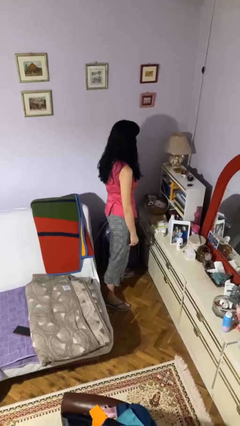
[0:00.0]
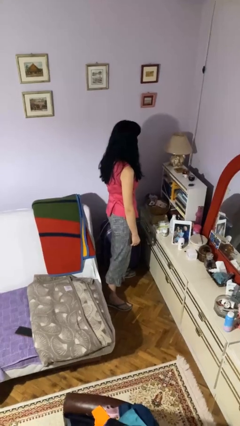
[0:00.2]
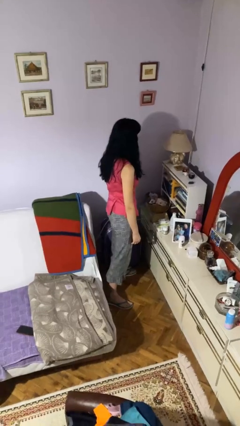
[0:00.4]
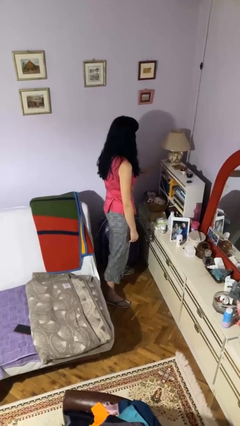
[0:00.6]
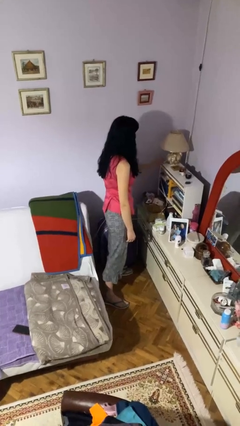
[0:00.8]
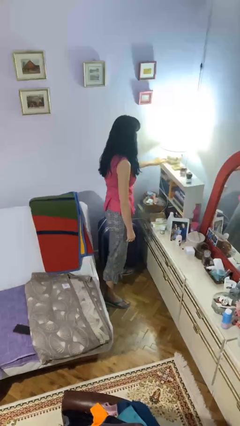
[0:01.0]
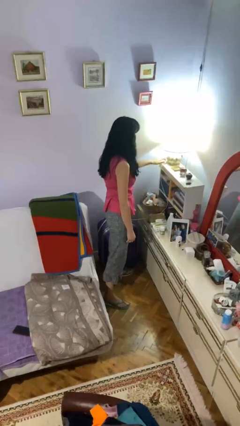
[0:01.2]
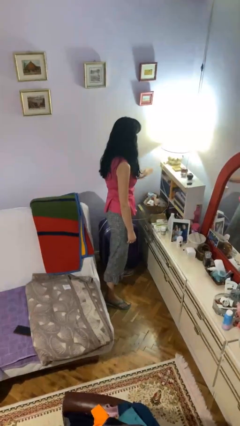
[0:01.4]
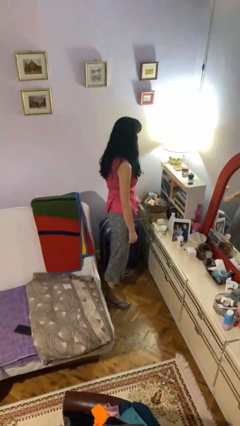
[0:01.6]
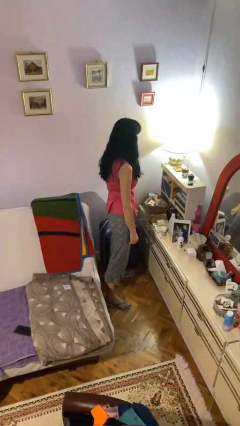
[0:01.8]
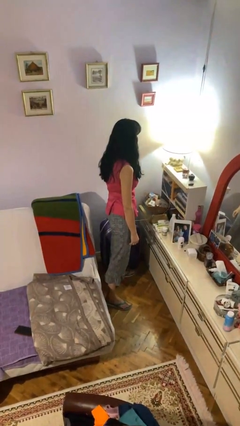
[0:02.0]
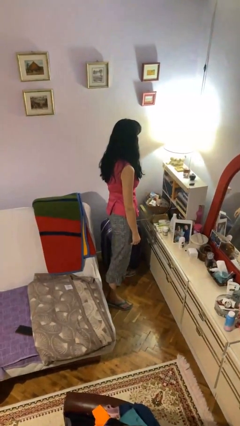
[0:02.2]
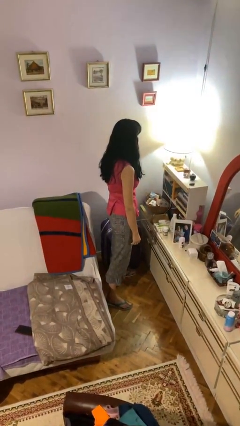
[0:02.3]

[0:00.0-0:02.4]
person turns on lamp

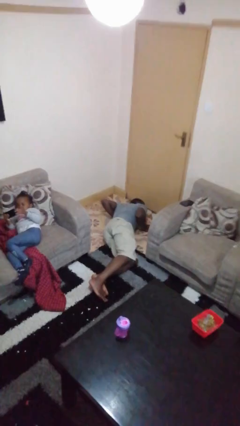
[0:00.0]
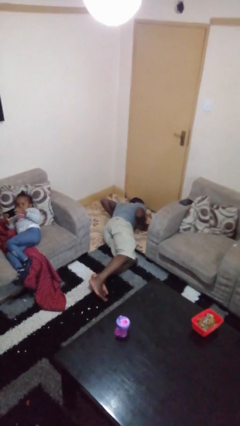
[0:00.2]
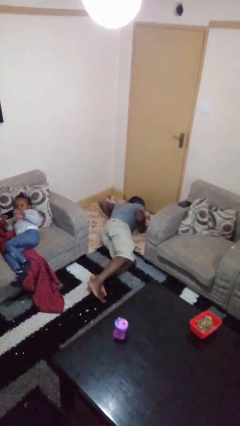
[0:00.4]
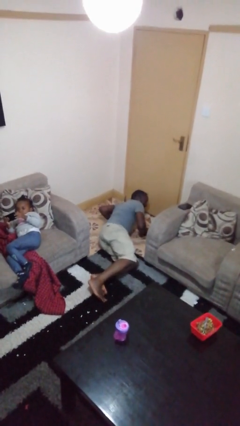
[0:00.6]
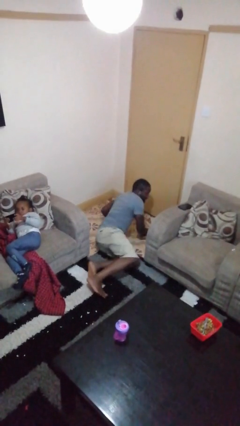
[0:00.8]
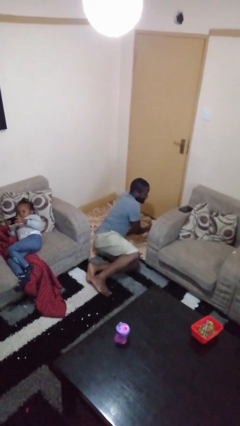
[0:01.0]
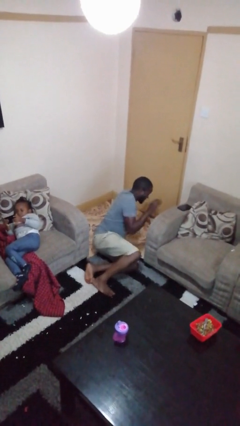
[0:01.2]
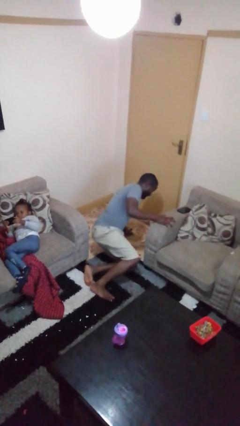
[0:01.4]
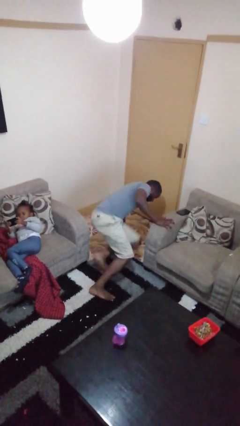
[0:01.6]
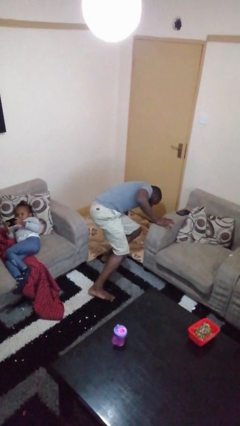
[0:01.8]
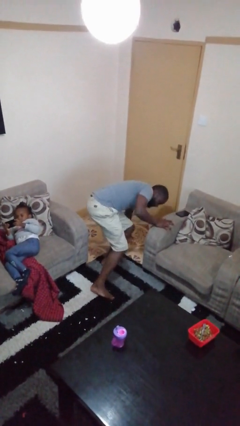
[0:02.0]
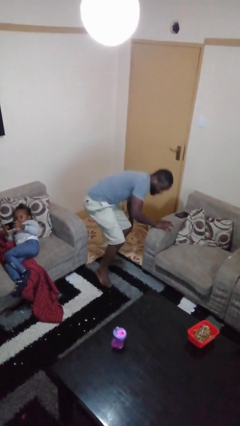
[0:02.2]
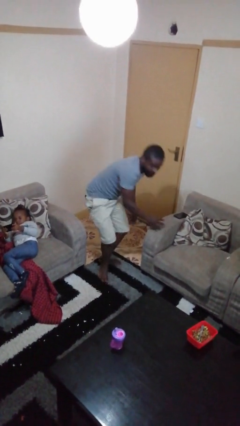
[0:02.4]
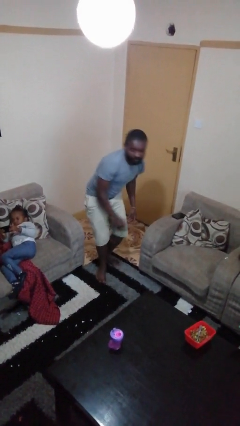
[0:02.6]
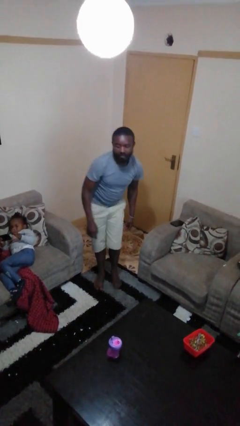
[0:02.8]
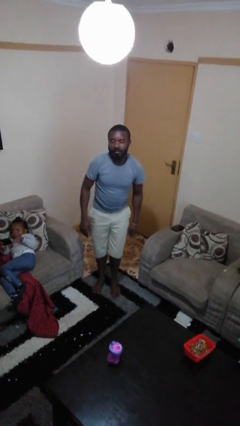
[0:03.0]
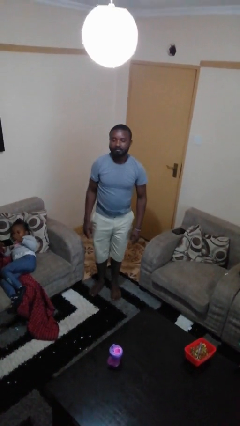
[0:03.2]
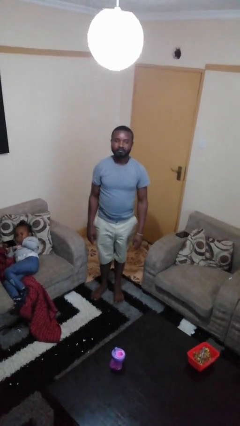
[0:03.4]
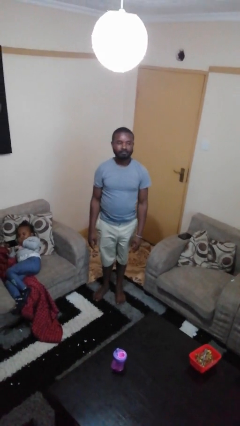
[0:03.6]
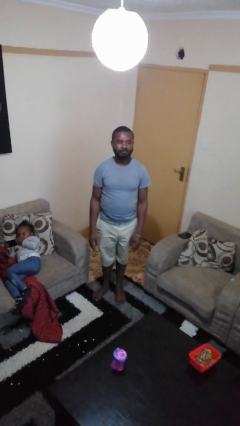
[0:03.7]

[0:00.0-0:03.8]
person stands up from floor

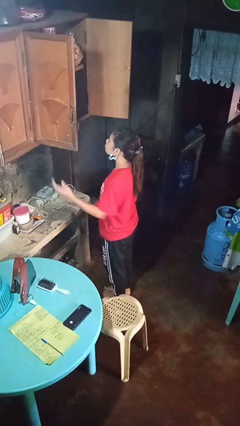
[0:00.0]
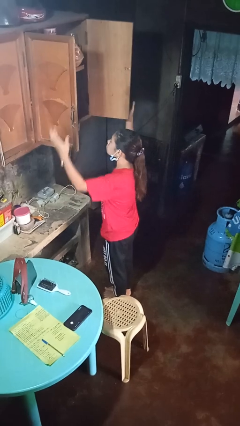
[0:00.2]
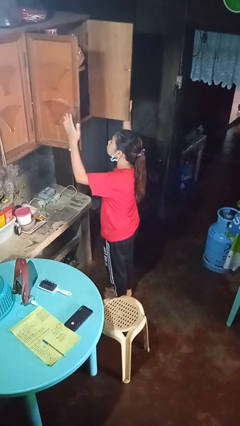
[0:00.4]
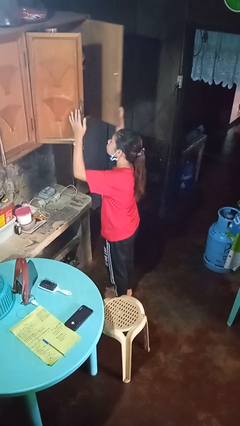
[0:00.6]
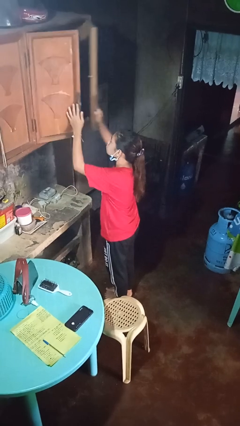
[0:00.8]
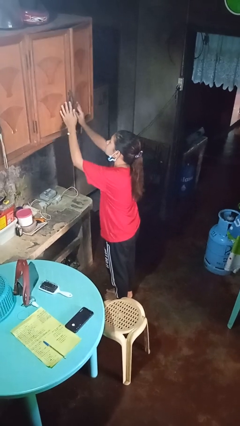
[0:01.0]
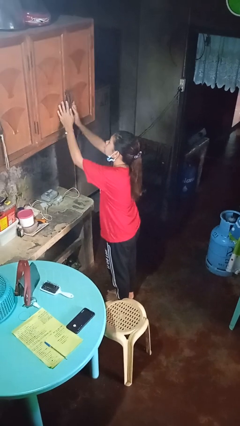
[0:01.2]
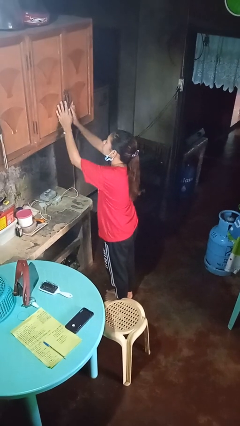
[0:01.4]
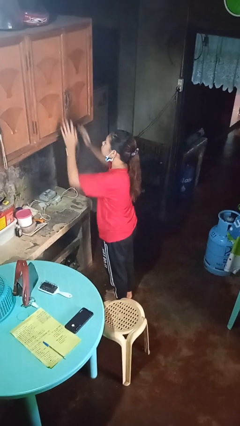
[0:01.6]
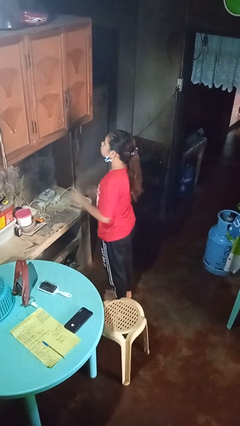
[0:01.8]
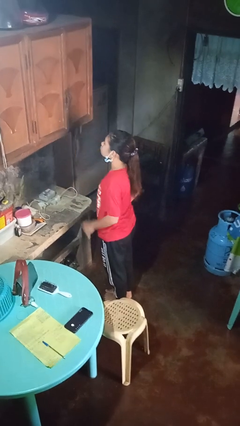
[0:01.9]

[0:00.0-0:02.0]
person closes cabinet

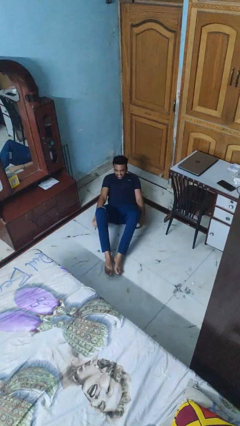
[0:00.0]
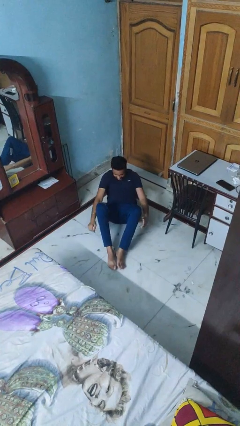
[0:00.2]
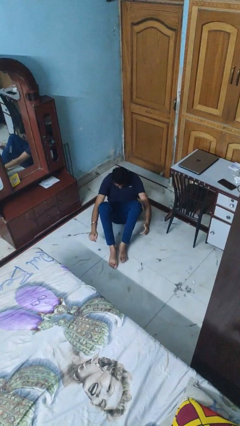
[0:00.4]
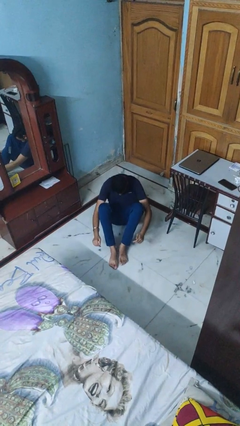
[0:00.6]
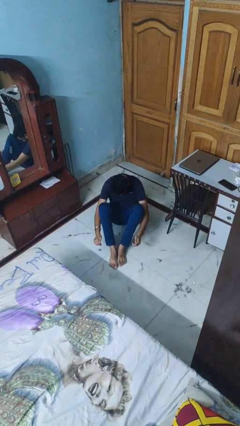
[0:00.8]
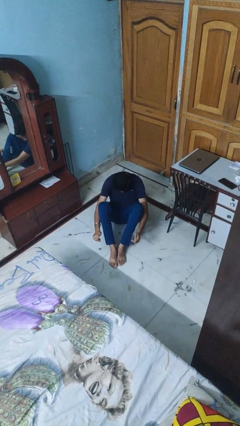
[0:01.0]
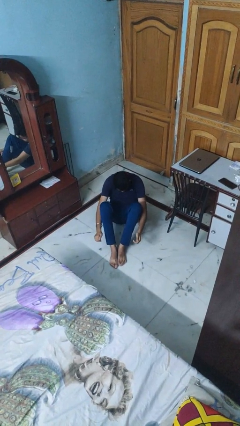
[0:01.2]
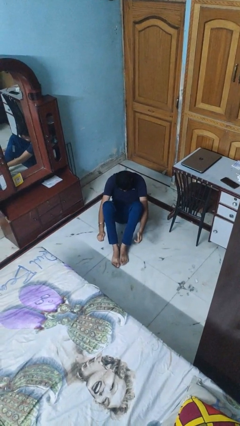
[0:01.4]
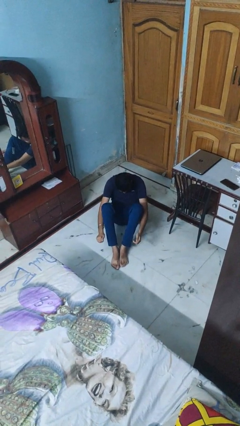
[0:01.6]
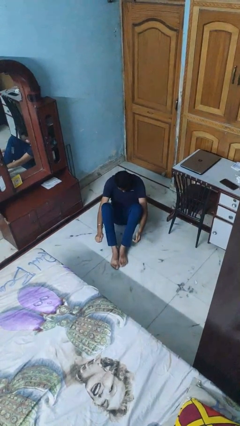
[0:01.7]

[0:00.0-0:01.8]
person exercises with situp

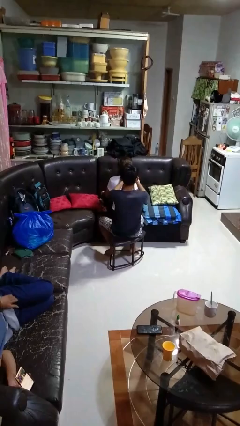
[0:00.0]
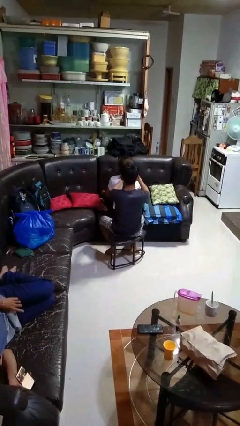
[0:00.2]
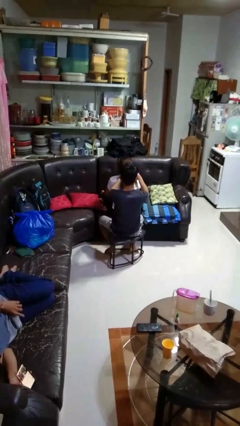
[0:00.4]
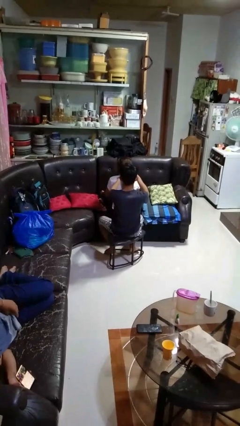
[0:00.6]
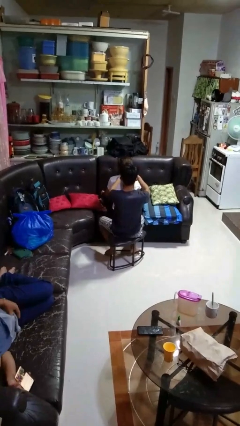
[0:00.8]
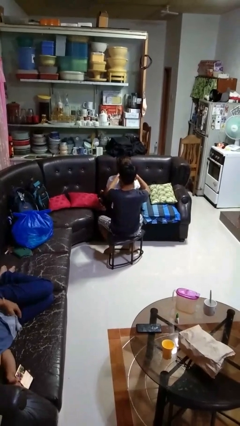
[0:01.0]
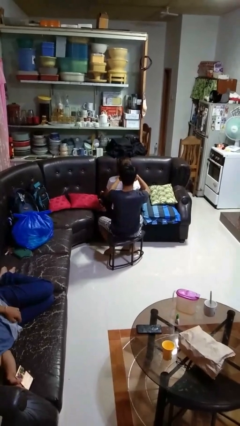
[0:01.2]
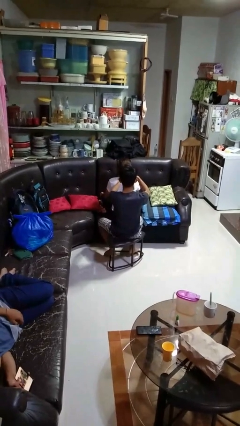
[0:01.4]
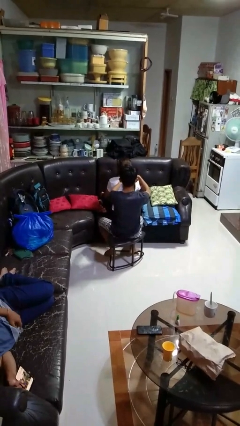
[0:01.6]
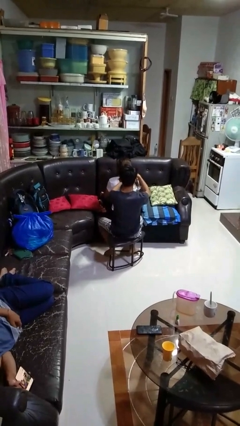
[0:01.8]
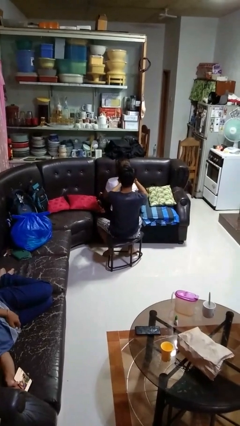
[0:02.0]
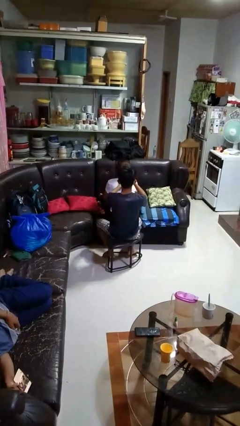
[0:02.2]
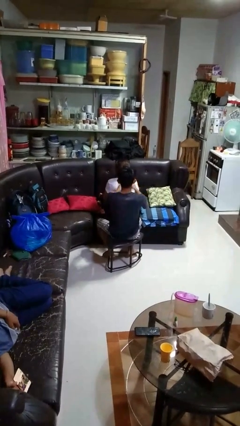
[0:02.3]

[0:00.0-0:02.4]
person braids hair of person

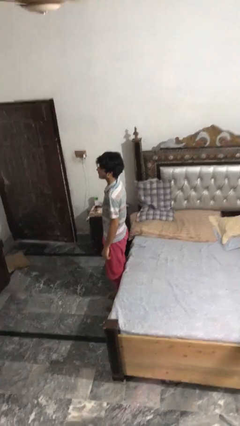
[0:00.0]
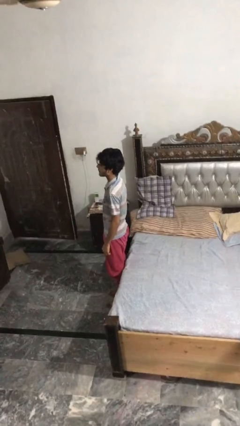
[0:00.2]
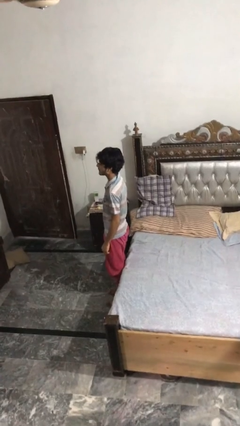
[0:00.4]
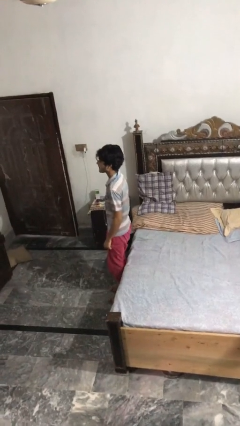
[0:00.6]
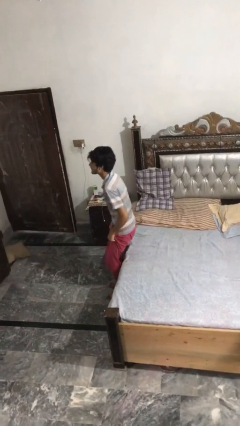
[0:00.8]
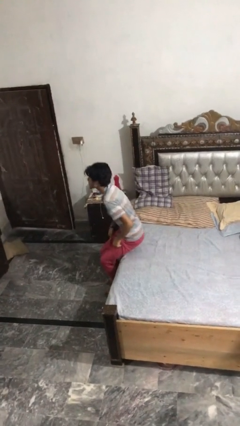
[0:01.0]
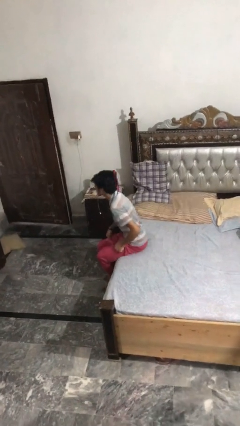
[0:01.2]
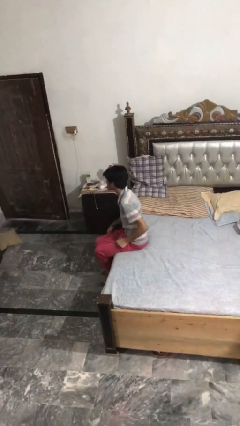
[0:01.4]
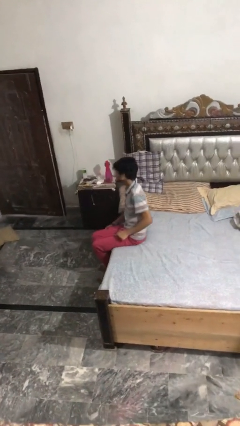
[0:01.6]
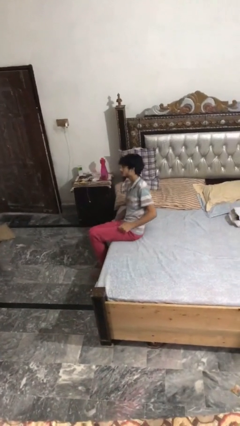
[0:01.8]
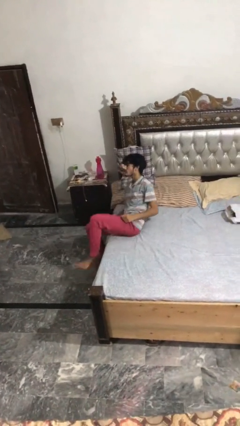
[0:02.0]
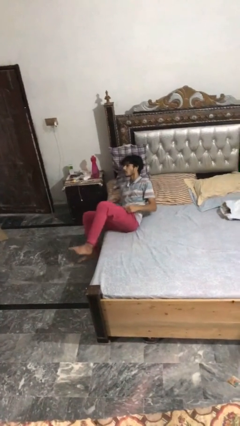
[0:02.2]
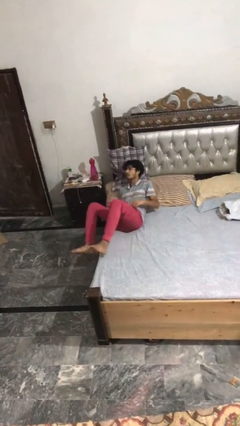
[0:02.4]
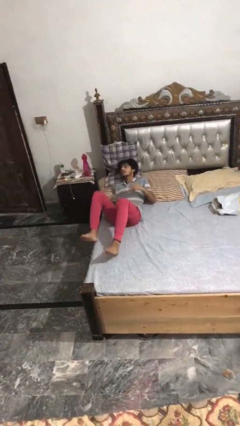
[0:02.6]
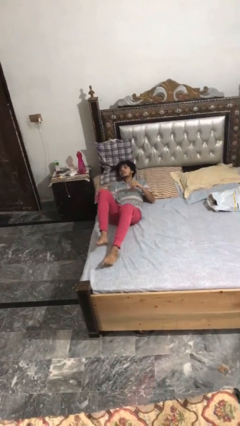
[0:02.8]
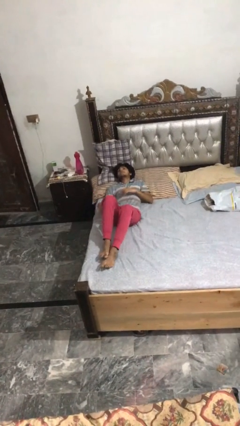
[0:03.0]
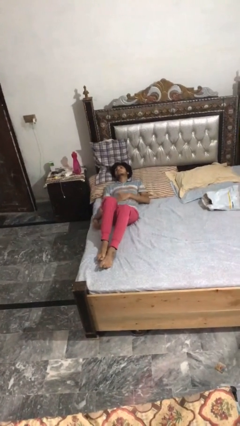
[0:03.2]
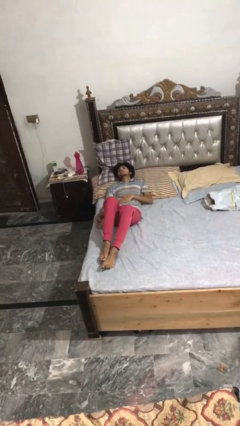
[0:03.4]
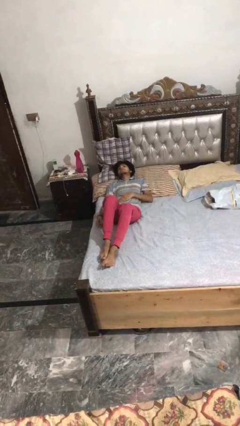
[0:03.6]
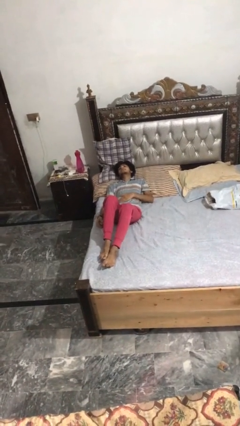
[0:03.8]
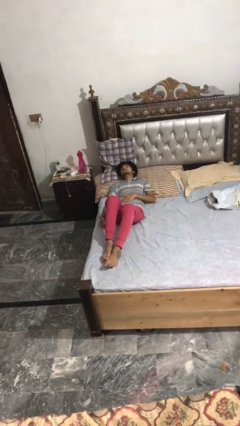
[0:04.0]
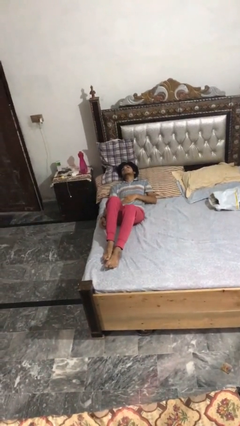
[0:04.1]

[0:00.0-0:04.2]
person lies down on bed

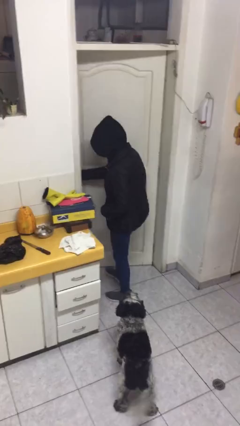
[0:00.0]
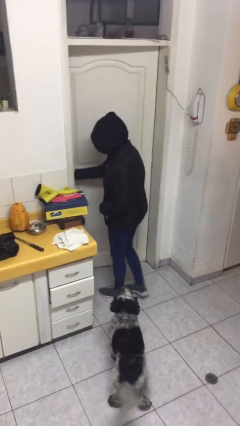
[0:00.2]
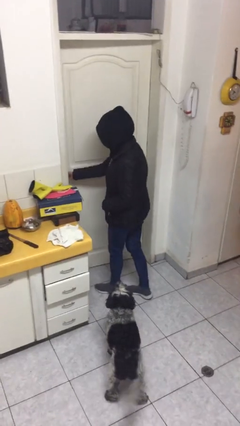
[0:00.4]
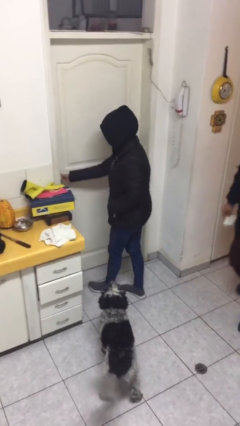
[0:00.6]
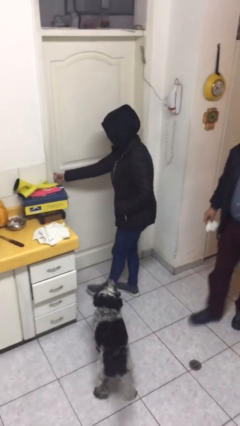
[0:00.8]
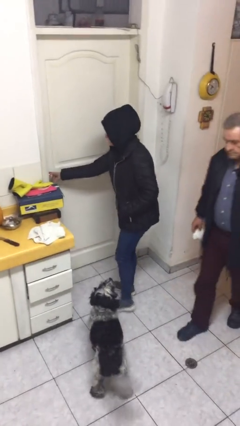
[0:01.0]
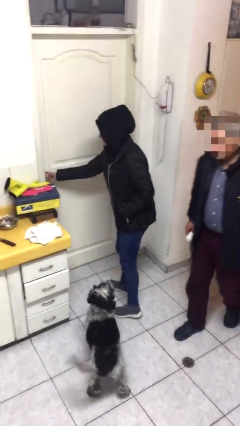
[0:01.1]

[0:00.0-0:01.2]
person closes facility door
